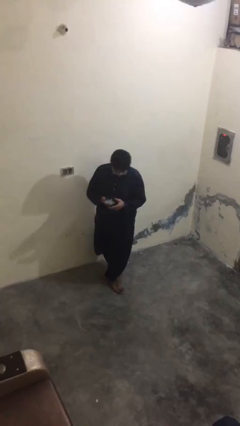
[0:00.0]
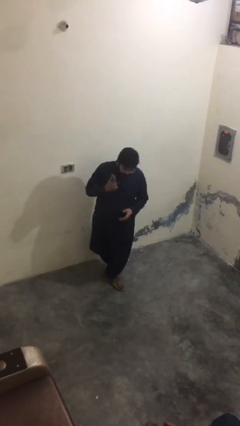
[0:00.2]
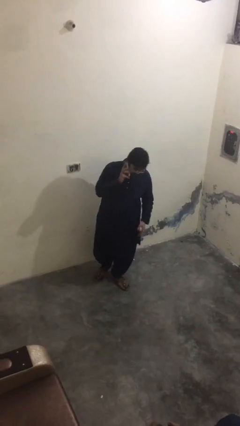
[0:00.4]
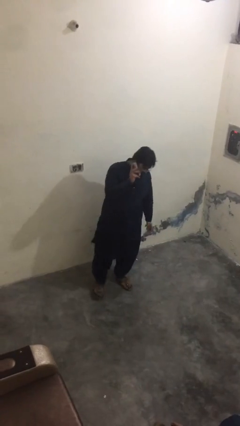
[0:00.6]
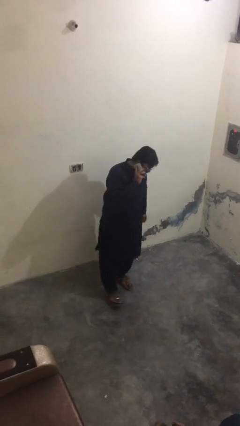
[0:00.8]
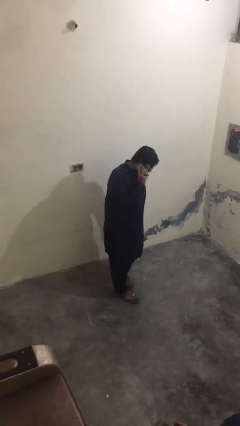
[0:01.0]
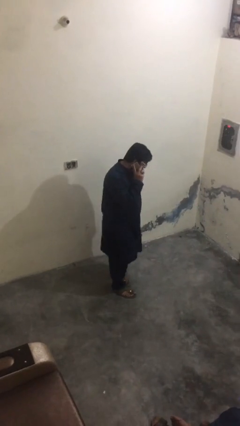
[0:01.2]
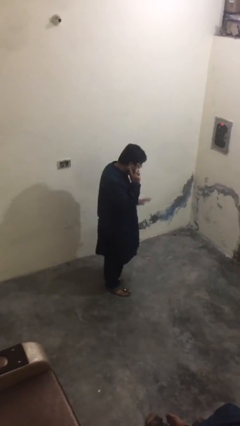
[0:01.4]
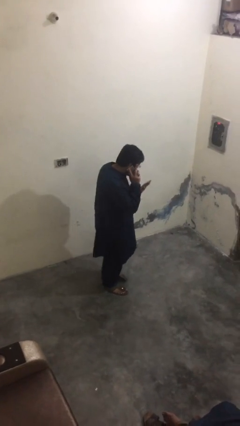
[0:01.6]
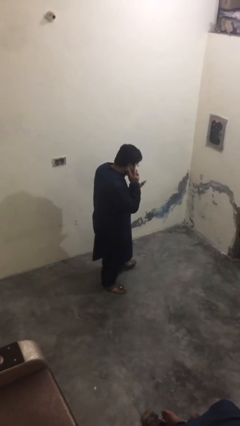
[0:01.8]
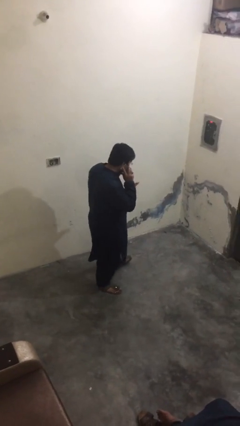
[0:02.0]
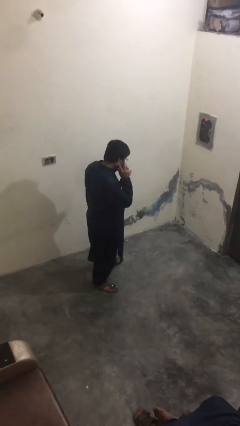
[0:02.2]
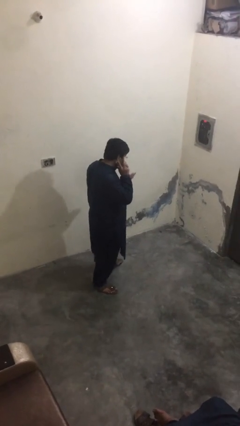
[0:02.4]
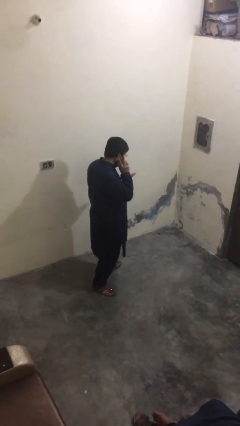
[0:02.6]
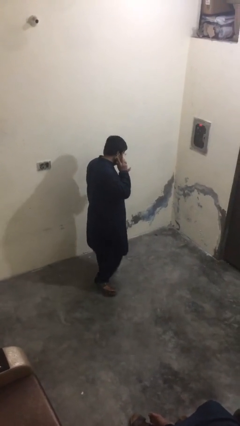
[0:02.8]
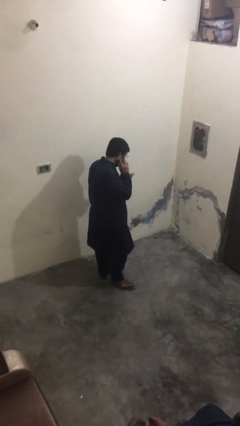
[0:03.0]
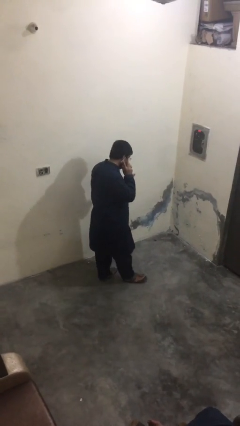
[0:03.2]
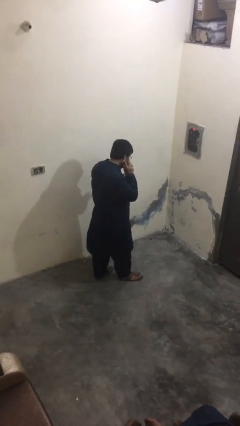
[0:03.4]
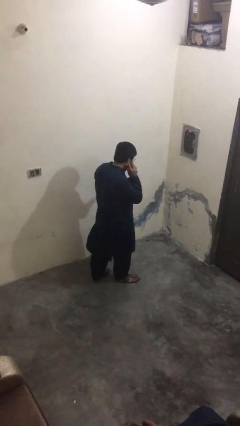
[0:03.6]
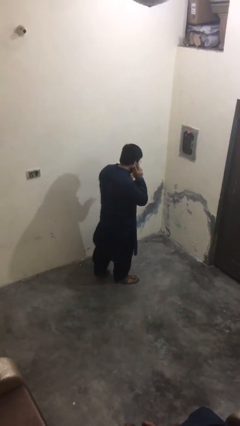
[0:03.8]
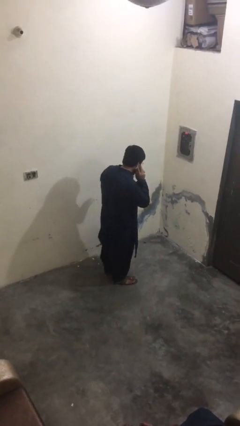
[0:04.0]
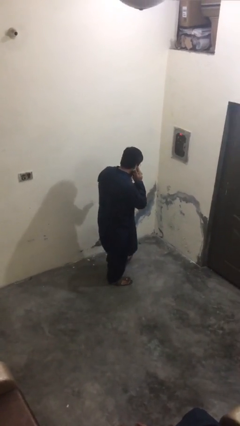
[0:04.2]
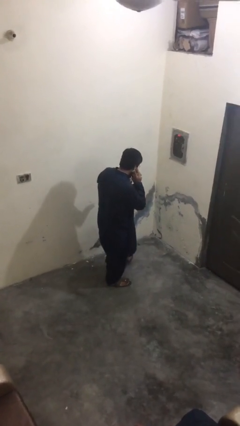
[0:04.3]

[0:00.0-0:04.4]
person talks on phone

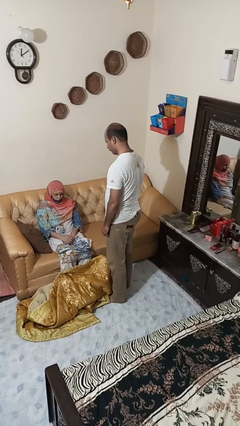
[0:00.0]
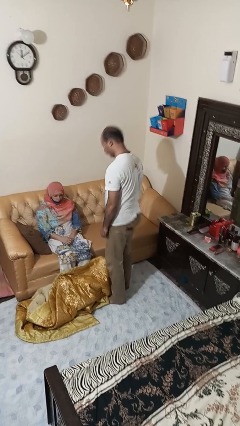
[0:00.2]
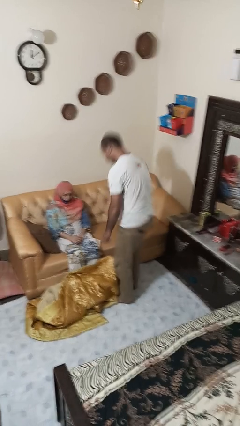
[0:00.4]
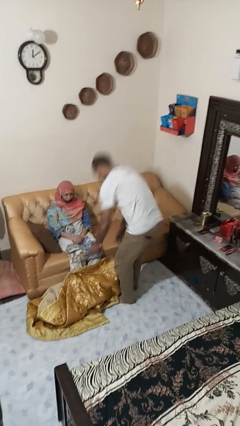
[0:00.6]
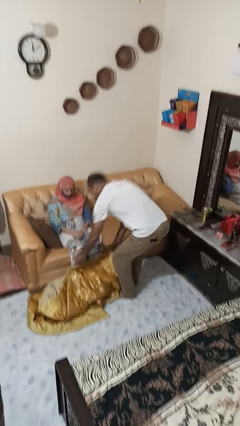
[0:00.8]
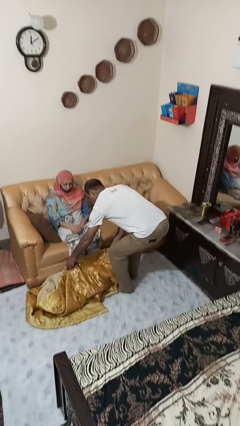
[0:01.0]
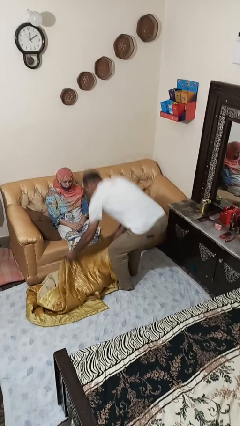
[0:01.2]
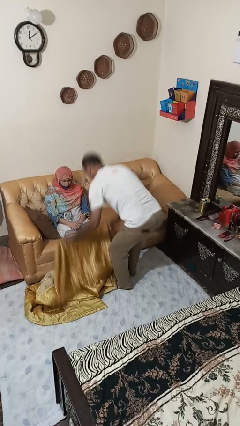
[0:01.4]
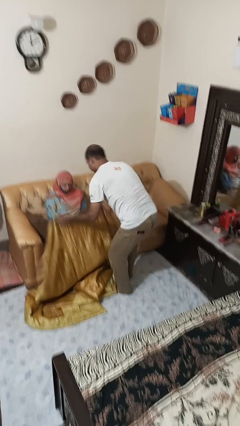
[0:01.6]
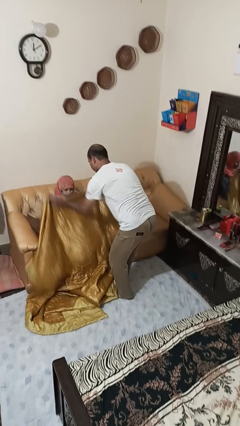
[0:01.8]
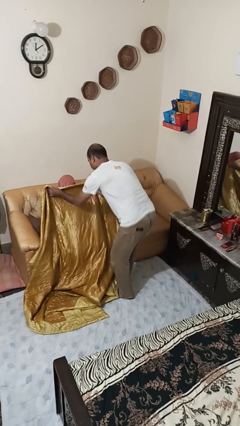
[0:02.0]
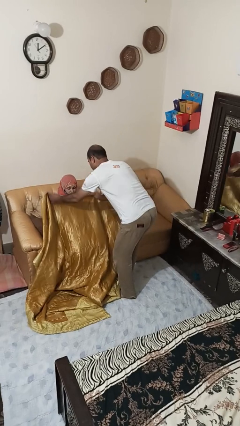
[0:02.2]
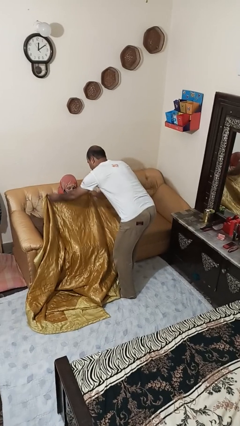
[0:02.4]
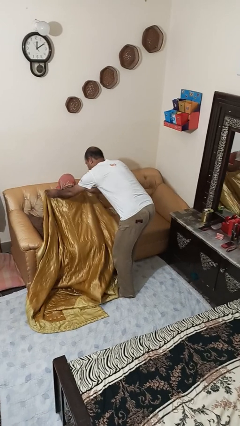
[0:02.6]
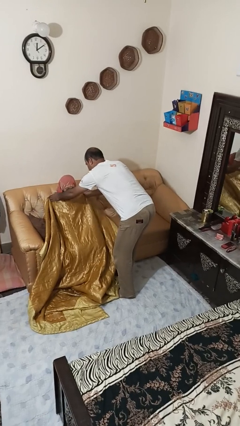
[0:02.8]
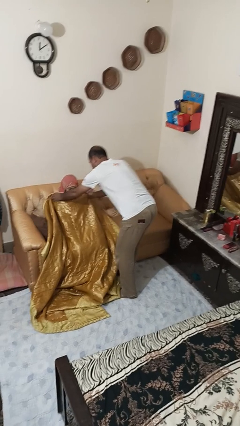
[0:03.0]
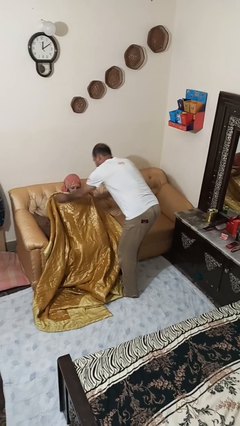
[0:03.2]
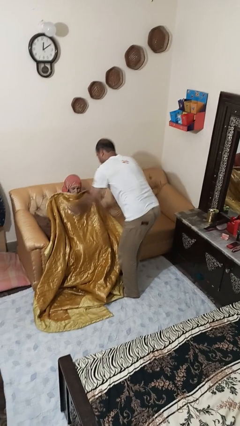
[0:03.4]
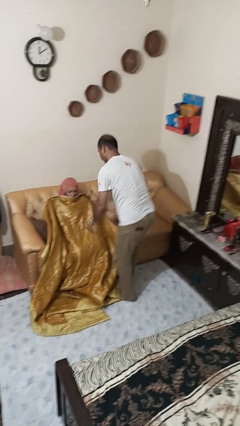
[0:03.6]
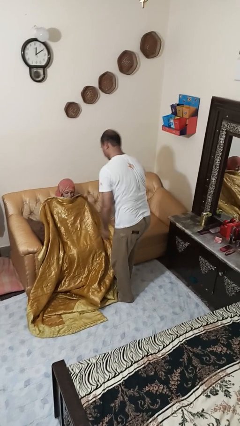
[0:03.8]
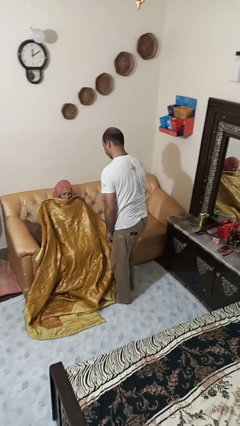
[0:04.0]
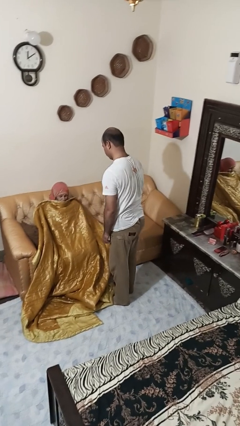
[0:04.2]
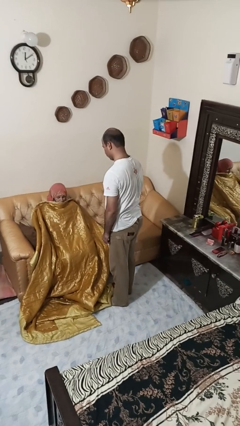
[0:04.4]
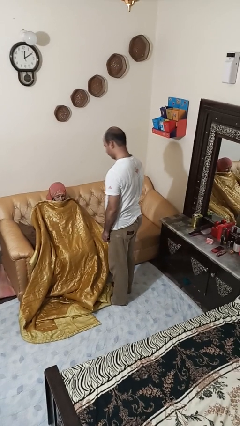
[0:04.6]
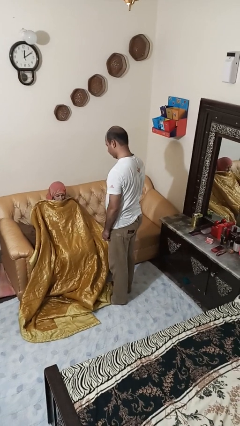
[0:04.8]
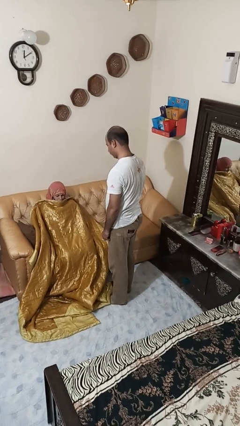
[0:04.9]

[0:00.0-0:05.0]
person covers friend with blanket

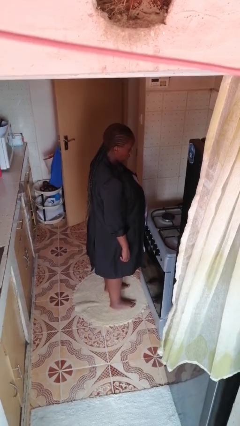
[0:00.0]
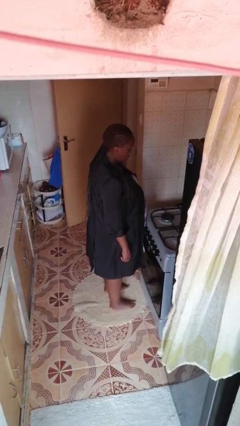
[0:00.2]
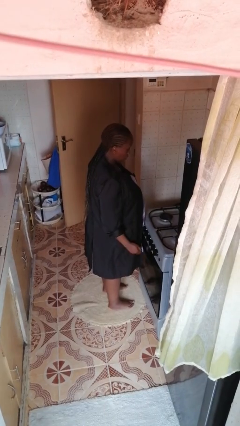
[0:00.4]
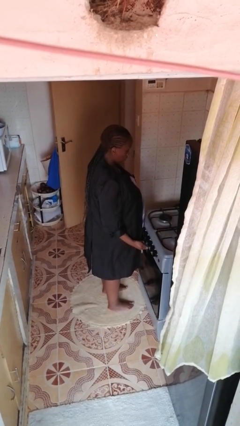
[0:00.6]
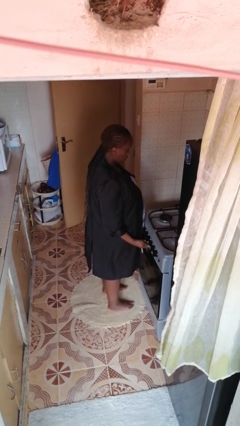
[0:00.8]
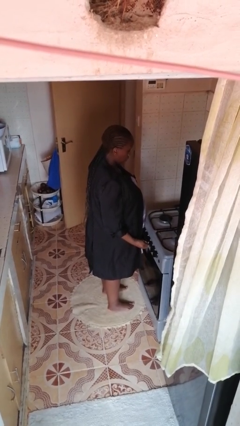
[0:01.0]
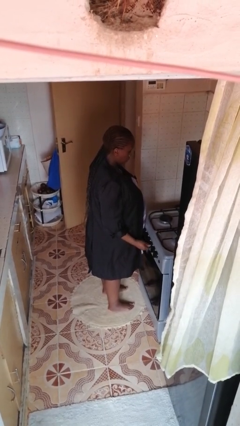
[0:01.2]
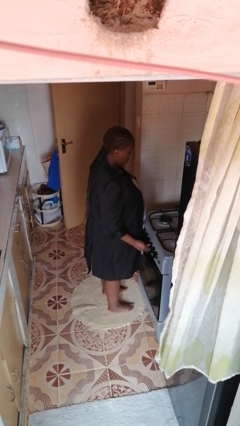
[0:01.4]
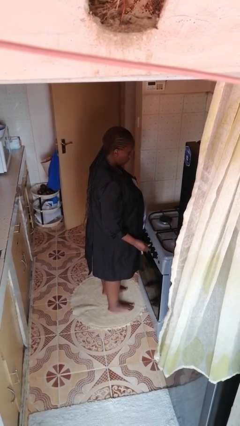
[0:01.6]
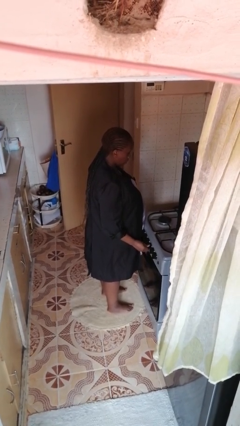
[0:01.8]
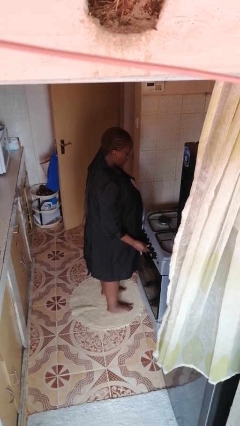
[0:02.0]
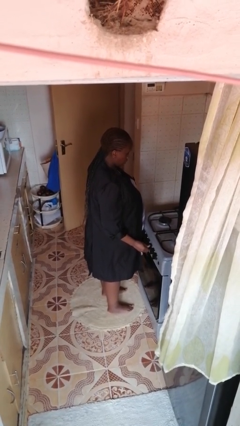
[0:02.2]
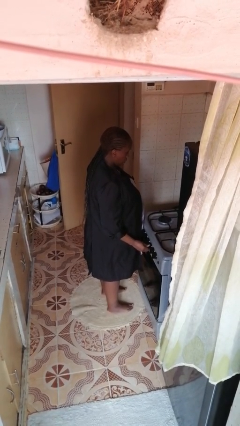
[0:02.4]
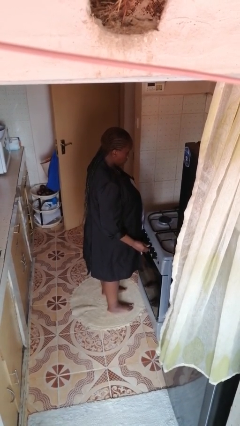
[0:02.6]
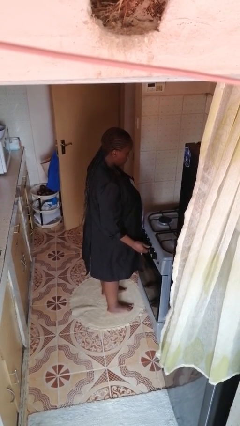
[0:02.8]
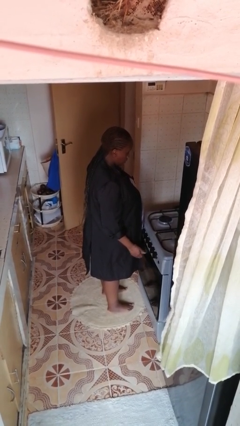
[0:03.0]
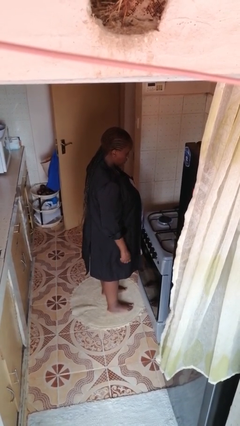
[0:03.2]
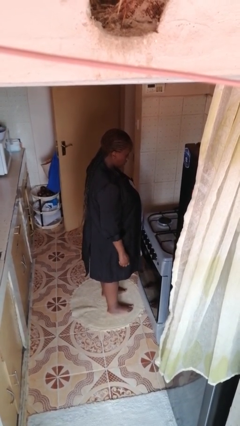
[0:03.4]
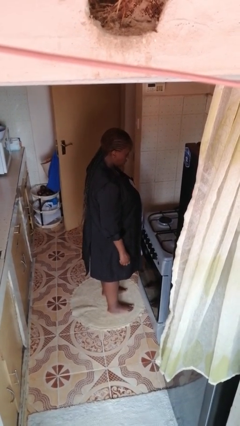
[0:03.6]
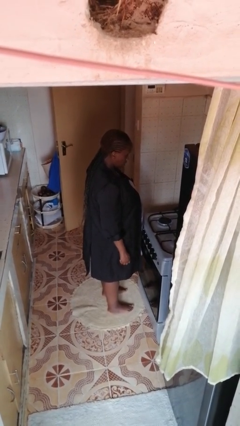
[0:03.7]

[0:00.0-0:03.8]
person turns on stovetop

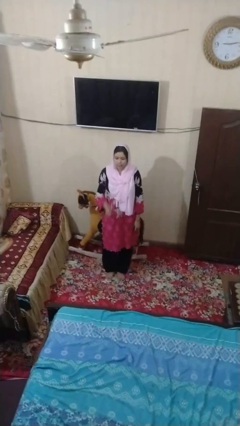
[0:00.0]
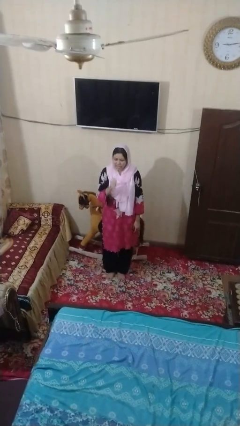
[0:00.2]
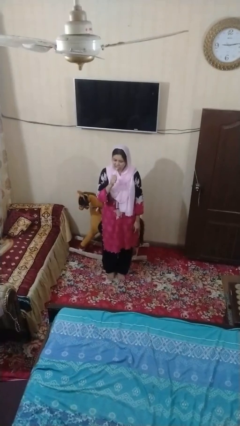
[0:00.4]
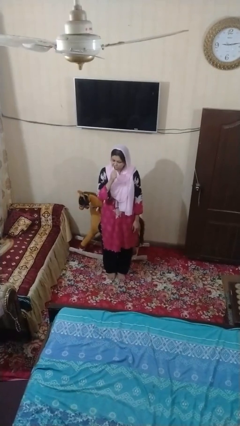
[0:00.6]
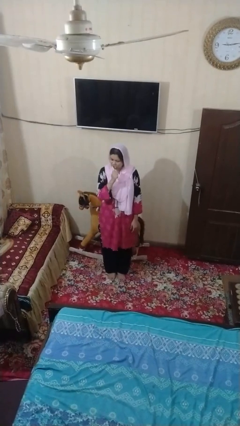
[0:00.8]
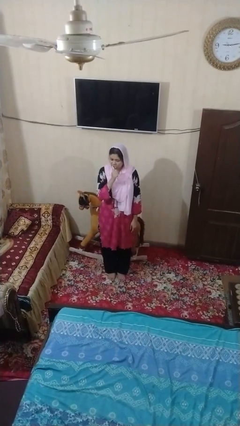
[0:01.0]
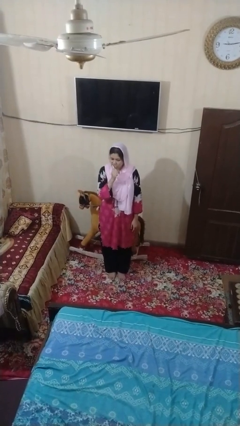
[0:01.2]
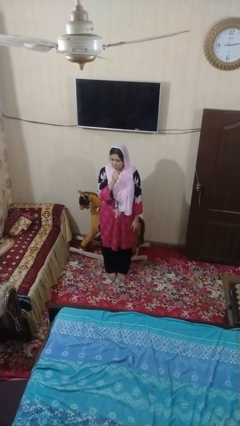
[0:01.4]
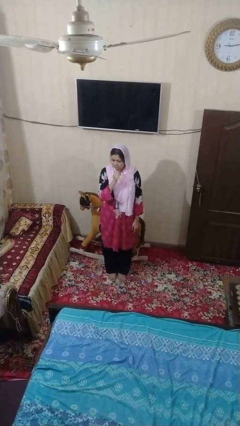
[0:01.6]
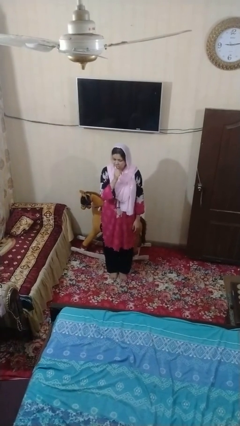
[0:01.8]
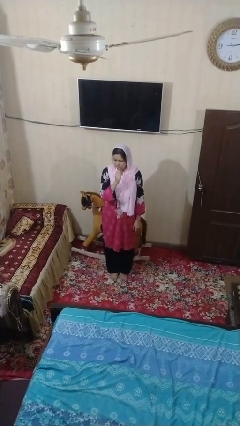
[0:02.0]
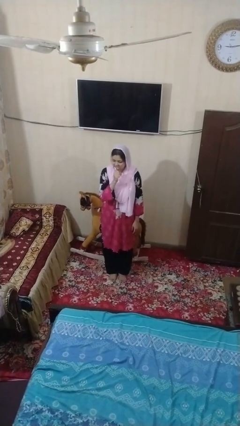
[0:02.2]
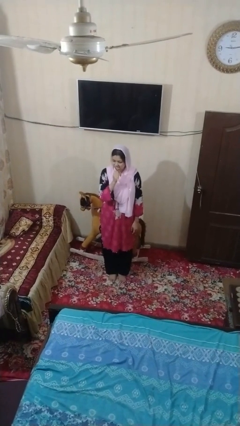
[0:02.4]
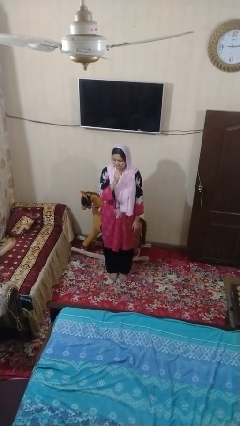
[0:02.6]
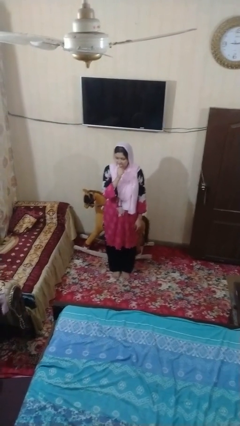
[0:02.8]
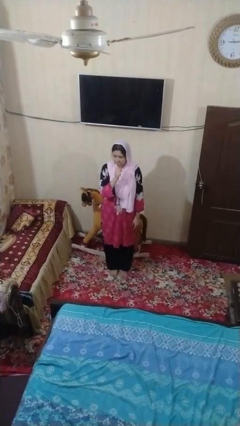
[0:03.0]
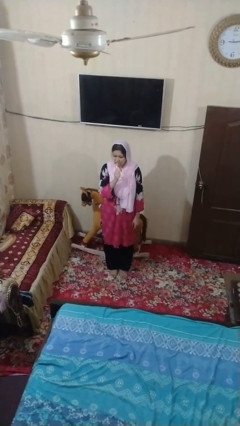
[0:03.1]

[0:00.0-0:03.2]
person brushes teeth

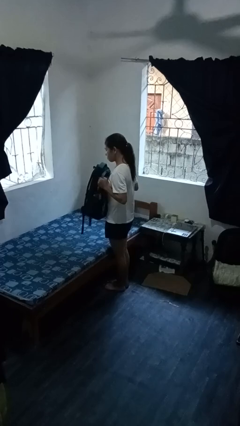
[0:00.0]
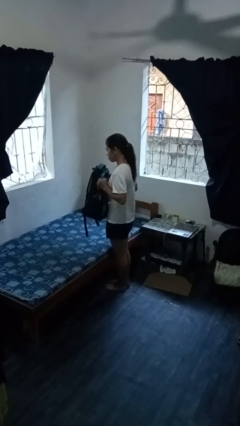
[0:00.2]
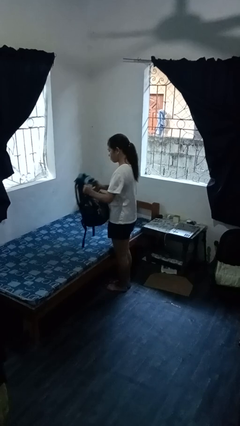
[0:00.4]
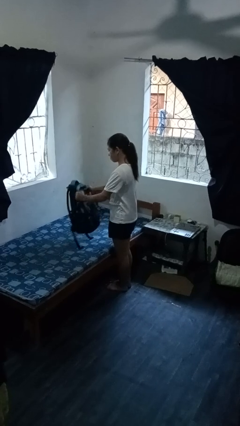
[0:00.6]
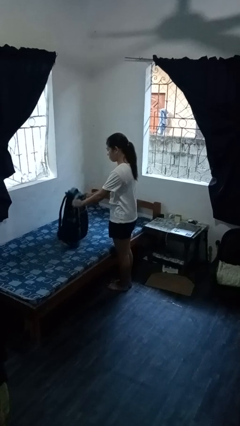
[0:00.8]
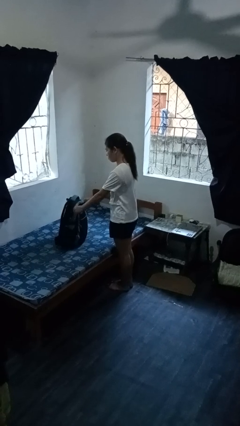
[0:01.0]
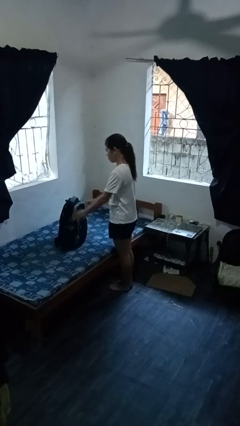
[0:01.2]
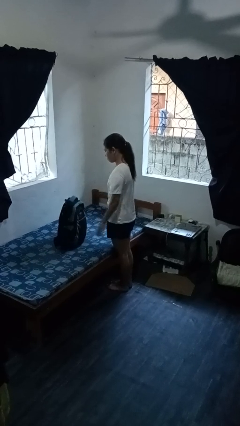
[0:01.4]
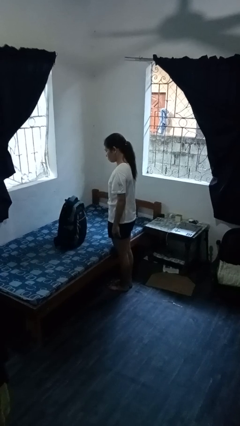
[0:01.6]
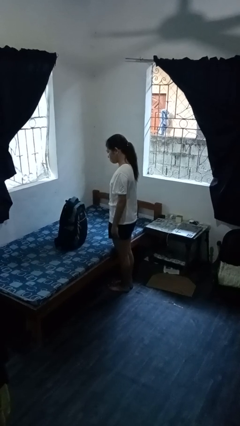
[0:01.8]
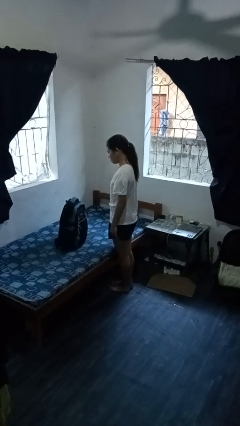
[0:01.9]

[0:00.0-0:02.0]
person puts down object on bed
